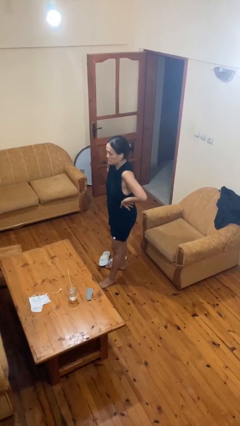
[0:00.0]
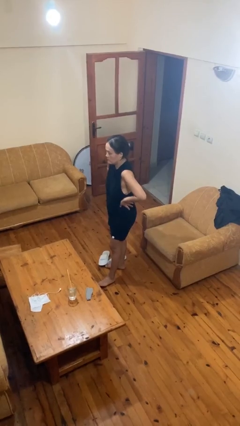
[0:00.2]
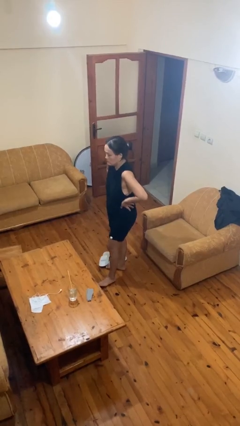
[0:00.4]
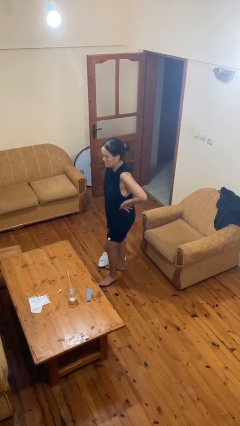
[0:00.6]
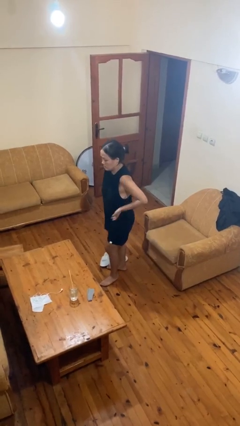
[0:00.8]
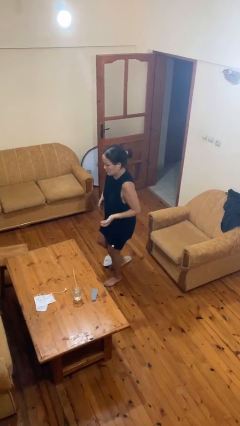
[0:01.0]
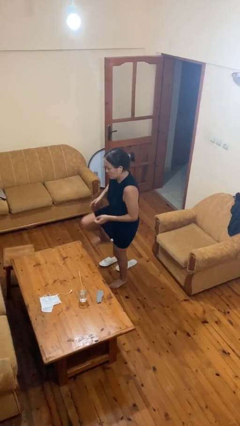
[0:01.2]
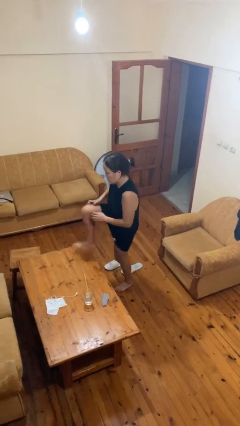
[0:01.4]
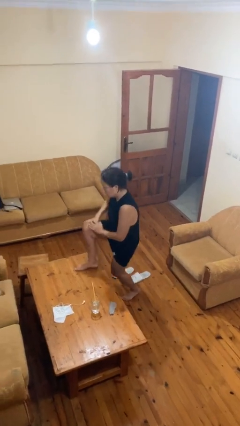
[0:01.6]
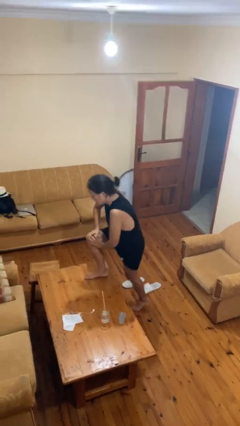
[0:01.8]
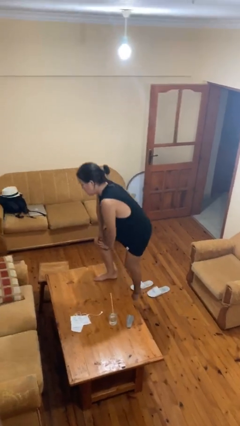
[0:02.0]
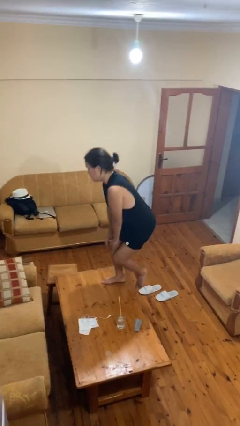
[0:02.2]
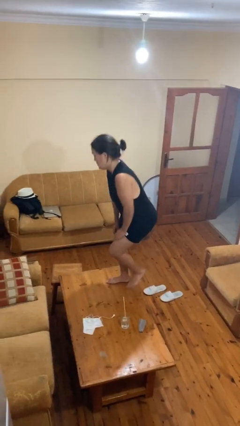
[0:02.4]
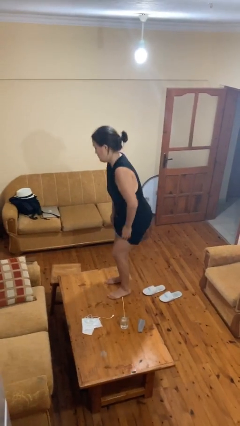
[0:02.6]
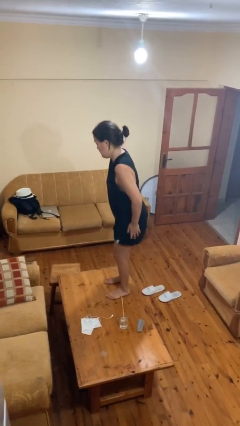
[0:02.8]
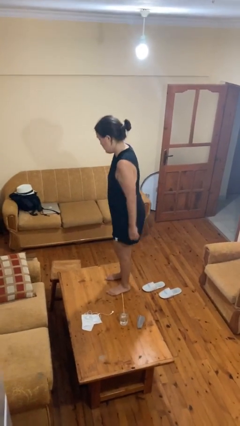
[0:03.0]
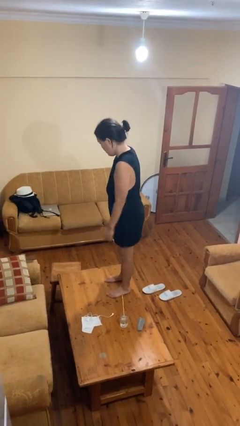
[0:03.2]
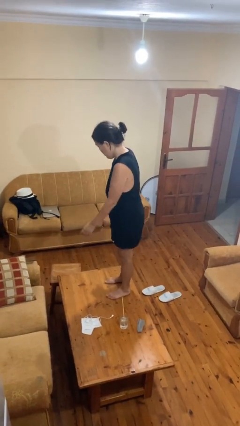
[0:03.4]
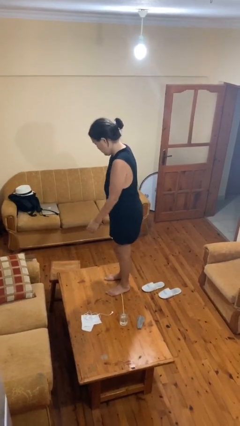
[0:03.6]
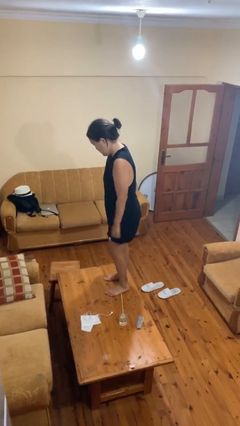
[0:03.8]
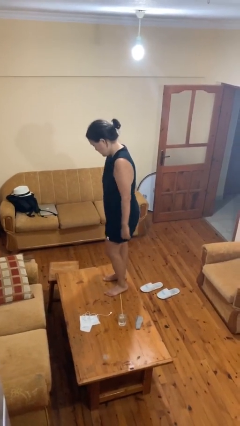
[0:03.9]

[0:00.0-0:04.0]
person climbs on table

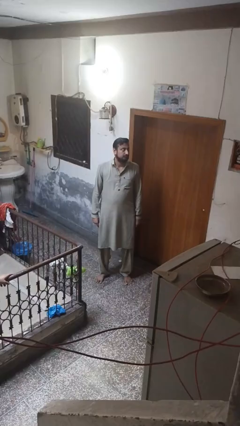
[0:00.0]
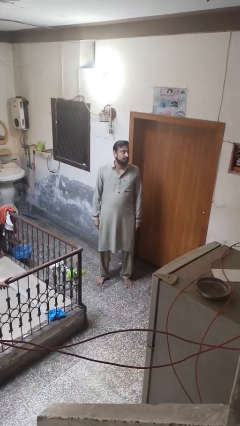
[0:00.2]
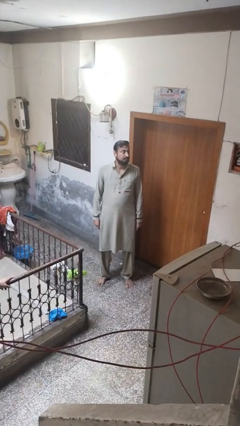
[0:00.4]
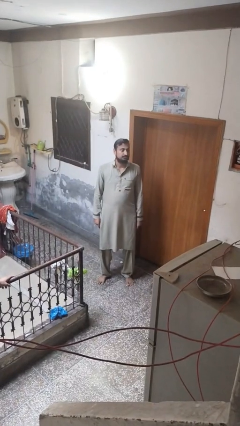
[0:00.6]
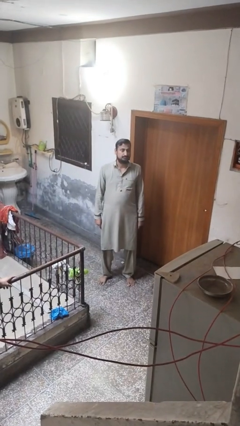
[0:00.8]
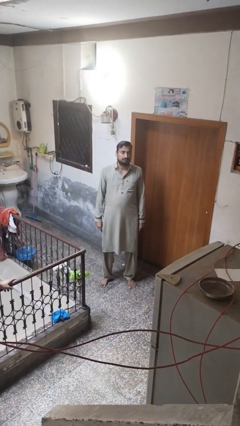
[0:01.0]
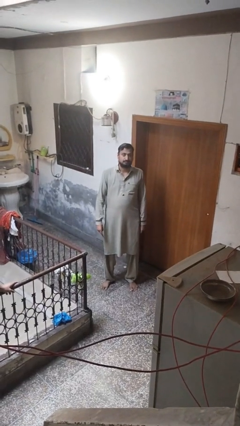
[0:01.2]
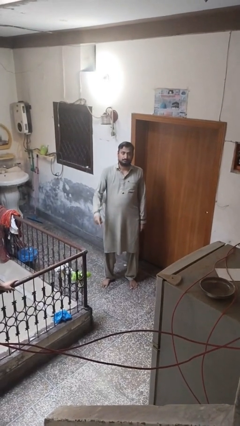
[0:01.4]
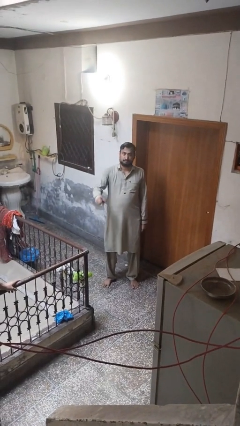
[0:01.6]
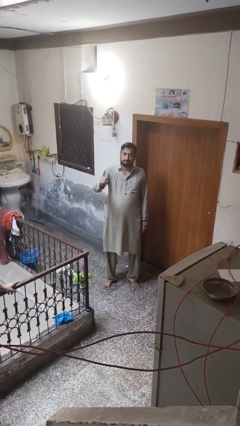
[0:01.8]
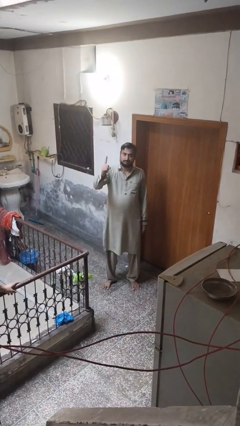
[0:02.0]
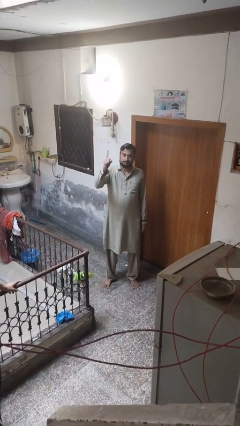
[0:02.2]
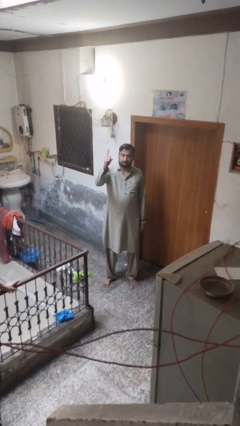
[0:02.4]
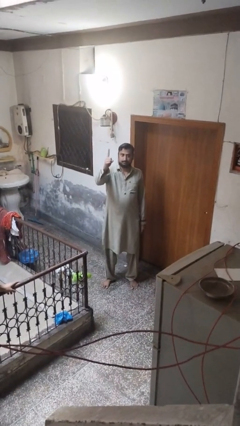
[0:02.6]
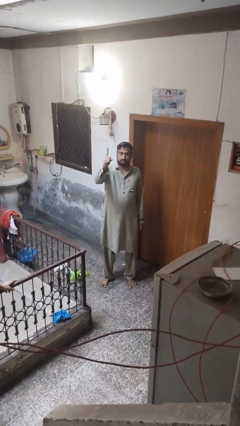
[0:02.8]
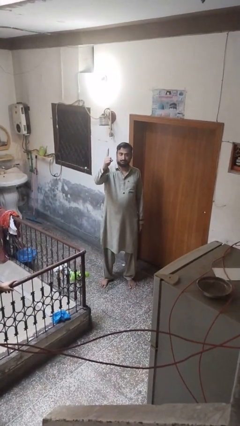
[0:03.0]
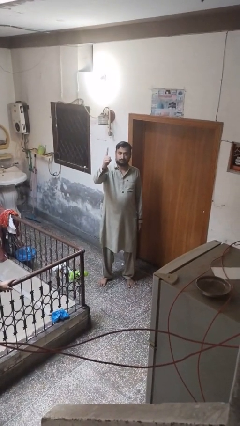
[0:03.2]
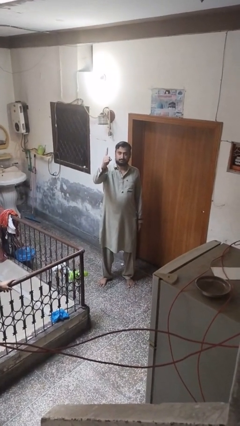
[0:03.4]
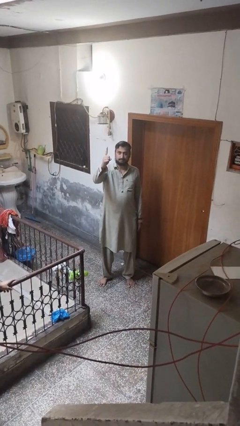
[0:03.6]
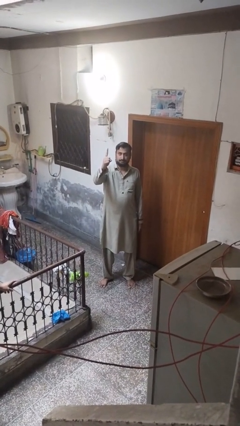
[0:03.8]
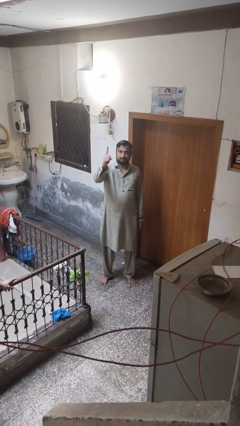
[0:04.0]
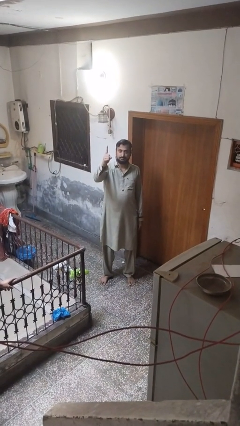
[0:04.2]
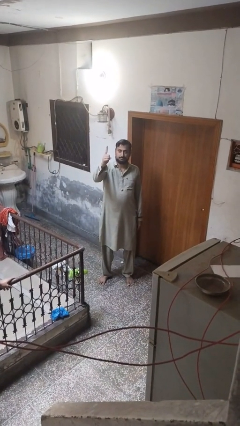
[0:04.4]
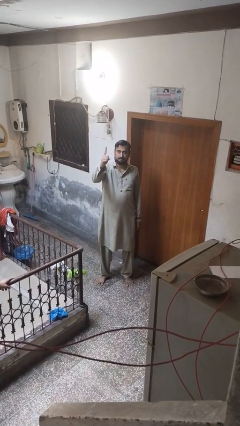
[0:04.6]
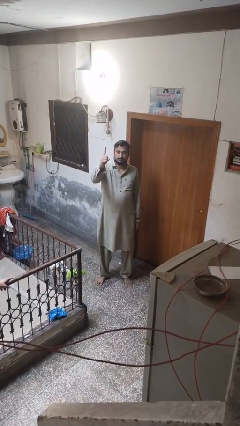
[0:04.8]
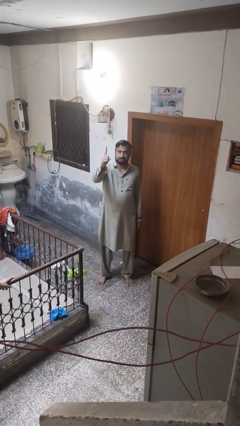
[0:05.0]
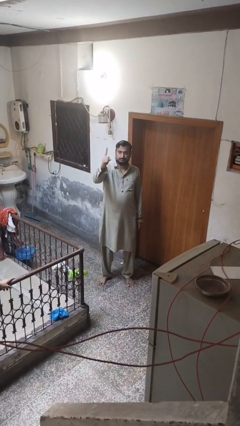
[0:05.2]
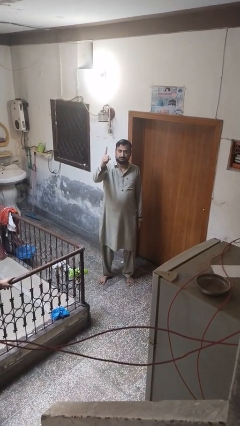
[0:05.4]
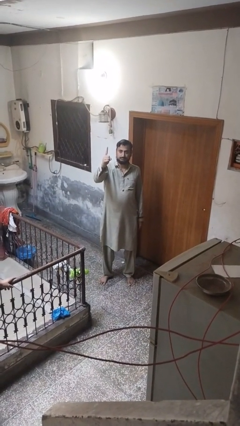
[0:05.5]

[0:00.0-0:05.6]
person gestures number one

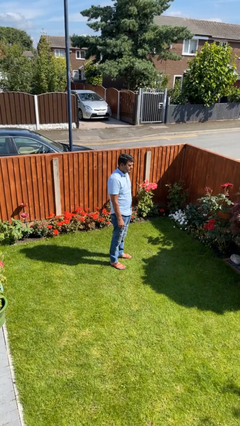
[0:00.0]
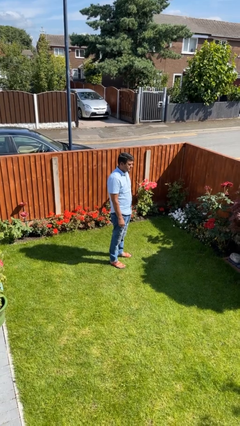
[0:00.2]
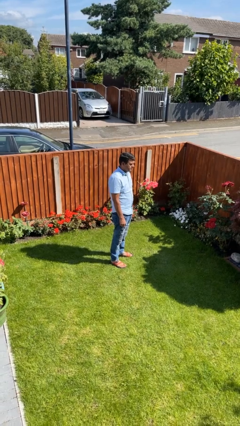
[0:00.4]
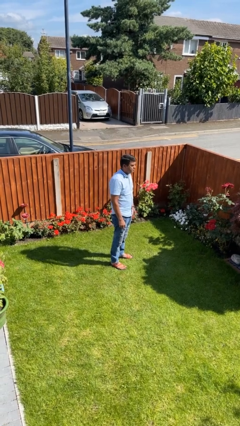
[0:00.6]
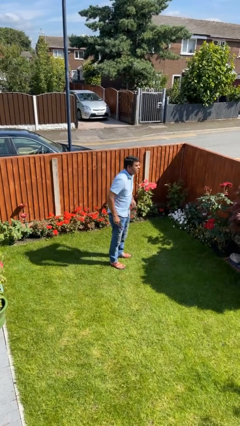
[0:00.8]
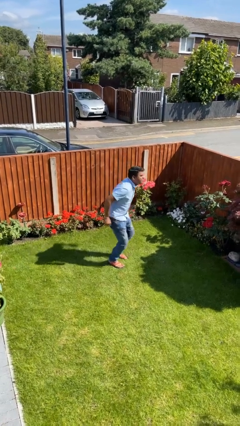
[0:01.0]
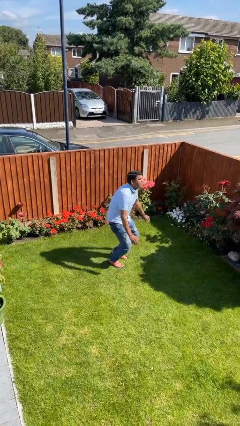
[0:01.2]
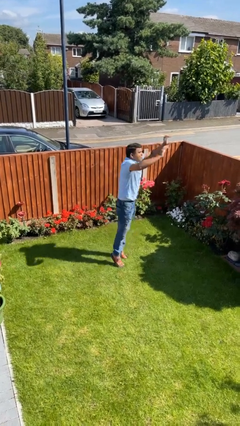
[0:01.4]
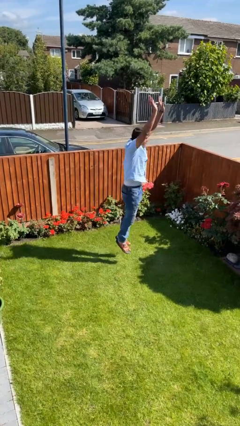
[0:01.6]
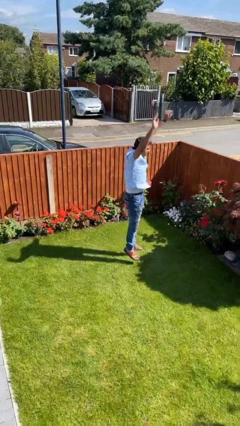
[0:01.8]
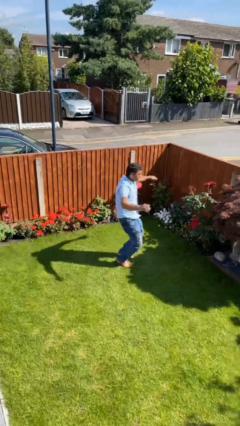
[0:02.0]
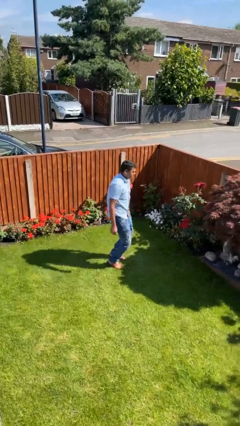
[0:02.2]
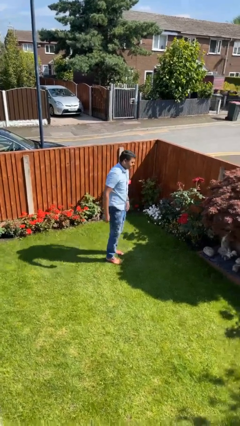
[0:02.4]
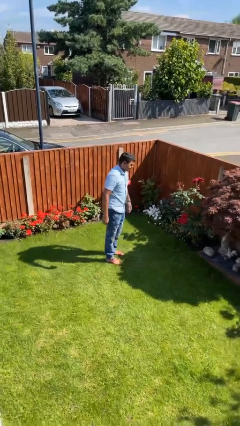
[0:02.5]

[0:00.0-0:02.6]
person jumps

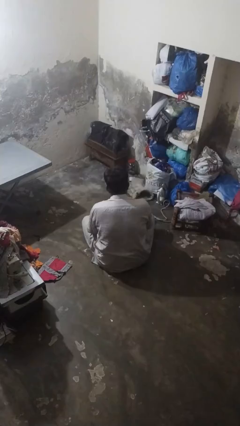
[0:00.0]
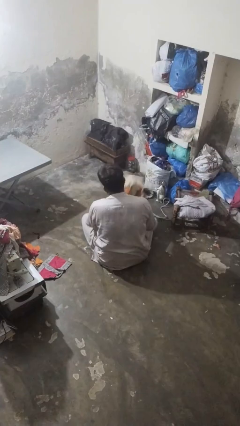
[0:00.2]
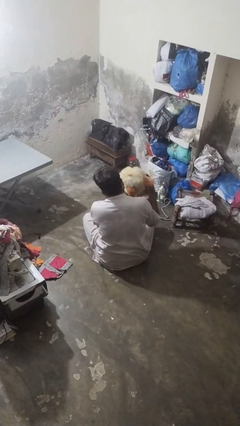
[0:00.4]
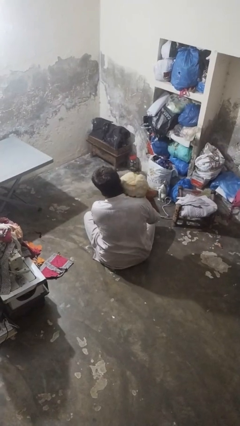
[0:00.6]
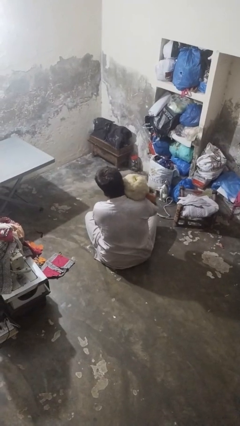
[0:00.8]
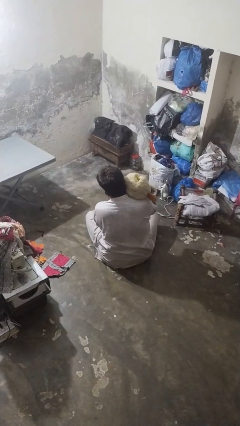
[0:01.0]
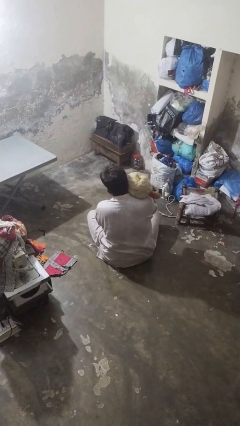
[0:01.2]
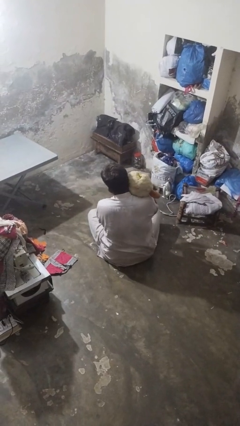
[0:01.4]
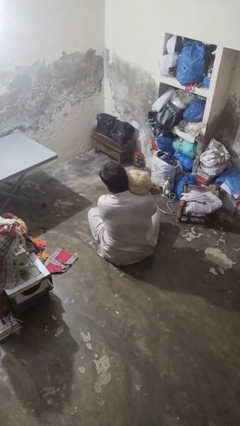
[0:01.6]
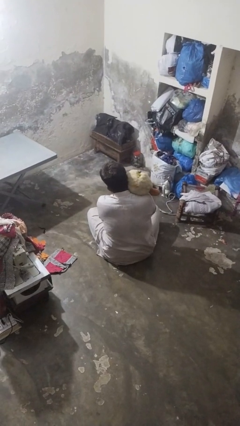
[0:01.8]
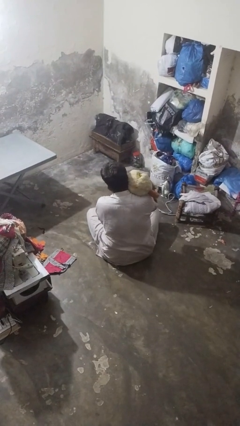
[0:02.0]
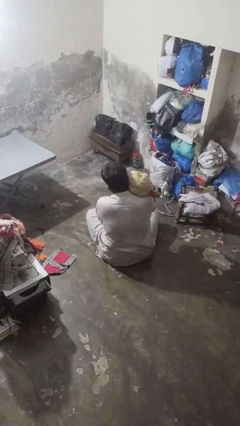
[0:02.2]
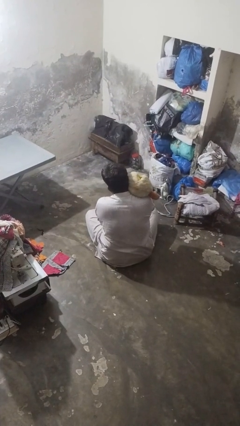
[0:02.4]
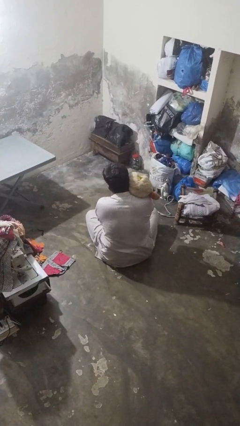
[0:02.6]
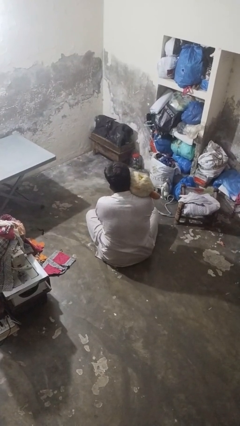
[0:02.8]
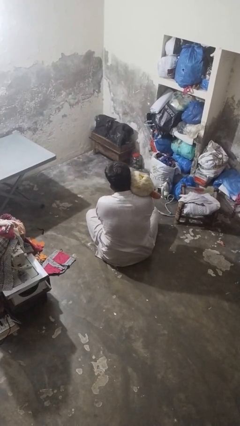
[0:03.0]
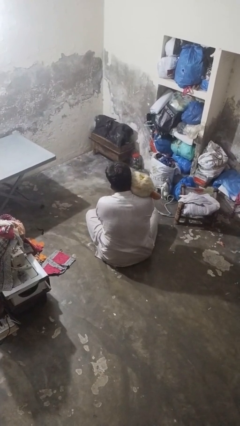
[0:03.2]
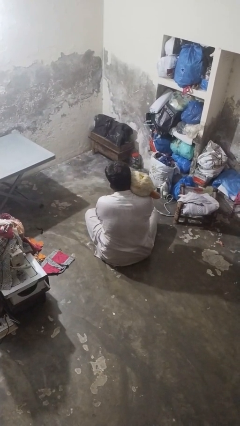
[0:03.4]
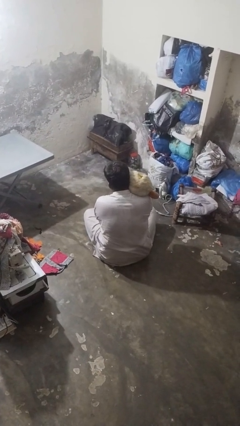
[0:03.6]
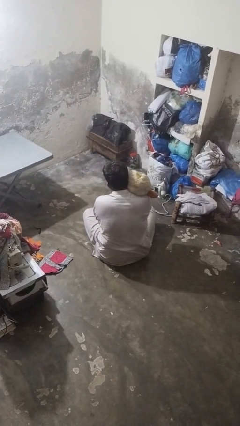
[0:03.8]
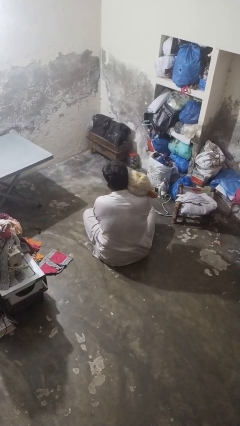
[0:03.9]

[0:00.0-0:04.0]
person hugs stuffed animal

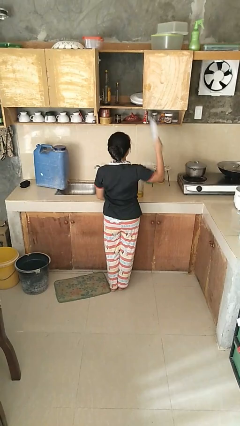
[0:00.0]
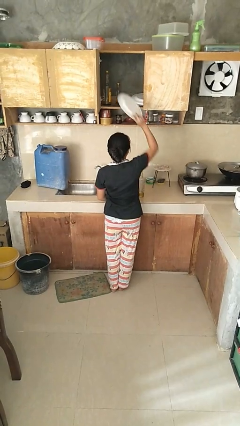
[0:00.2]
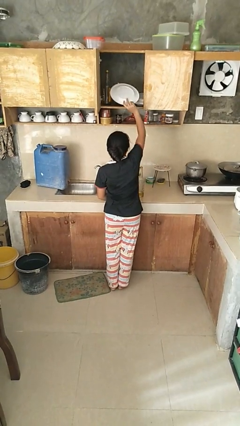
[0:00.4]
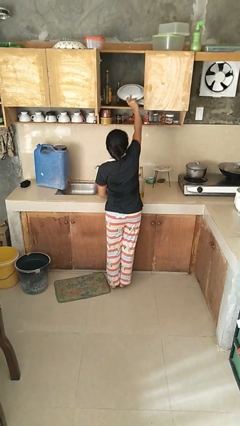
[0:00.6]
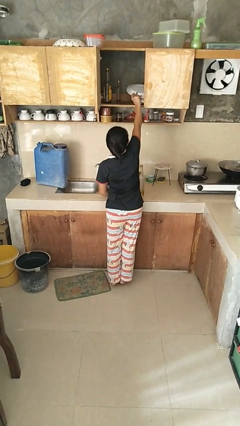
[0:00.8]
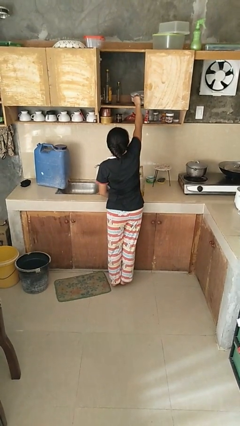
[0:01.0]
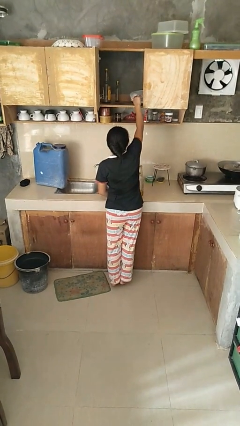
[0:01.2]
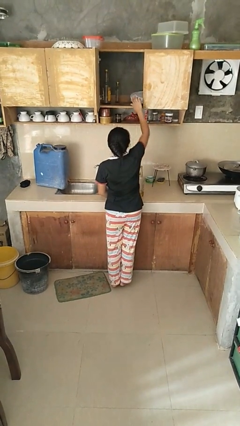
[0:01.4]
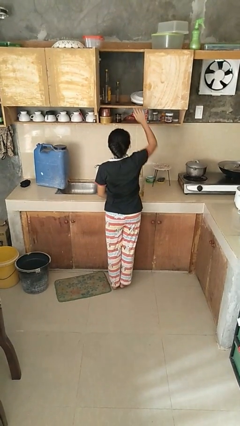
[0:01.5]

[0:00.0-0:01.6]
person puts object in cabinet
